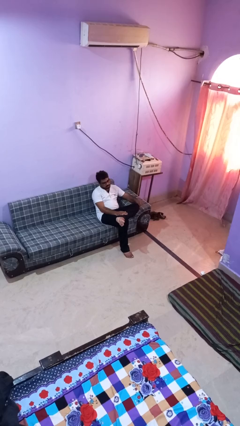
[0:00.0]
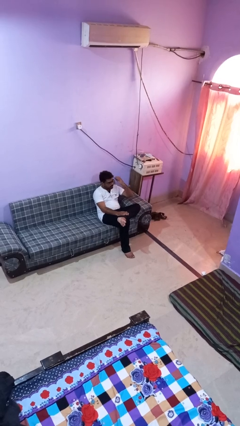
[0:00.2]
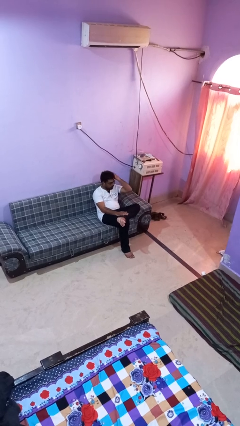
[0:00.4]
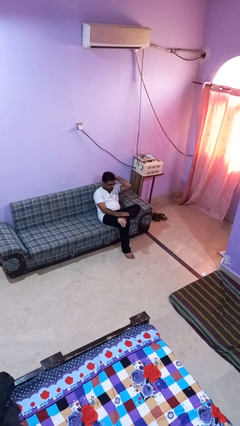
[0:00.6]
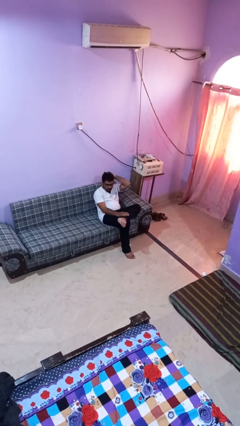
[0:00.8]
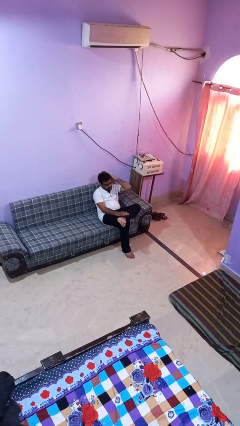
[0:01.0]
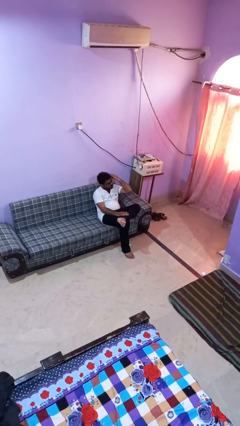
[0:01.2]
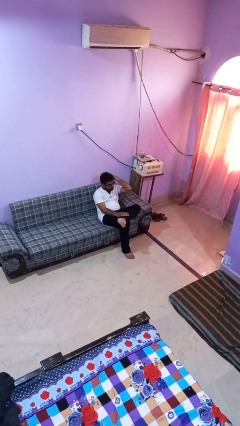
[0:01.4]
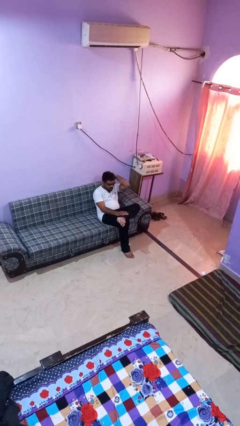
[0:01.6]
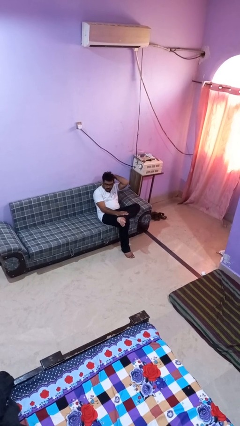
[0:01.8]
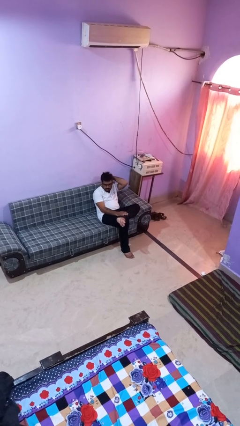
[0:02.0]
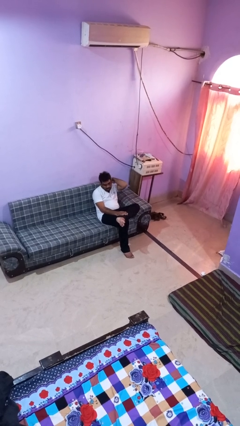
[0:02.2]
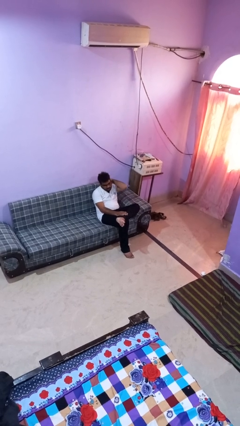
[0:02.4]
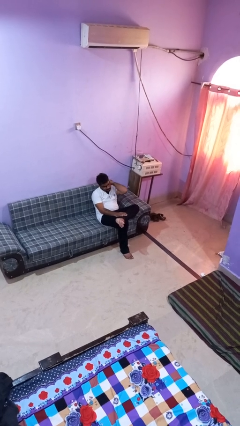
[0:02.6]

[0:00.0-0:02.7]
person strokes hair

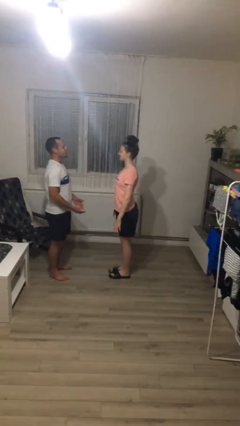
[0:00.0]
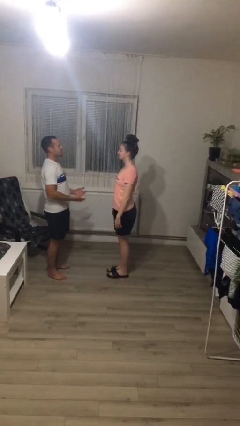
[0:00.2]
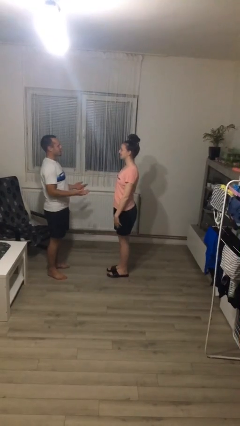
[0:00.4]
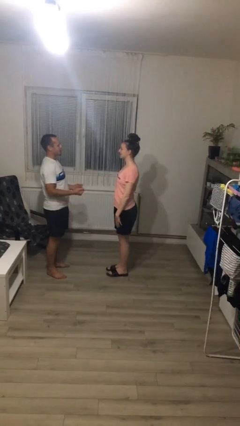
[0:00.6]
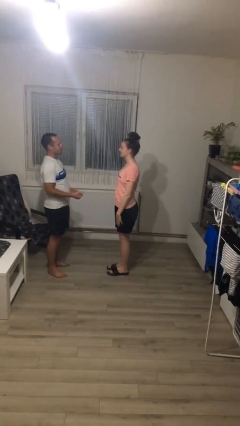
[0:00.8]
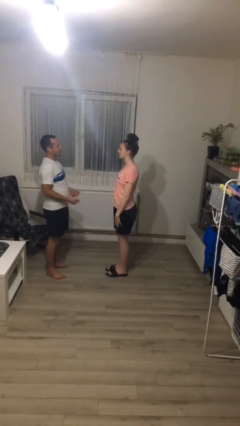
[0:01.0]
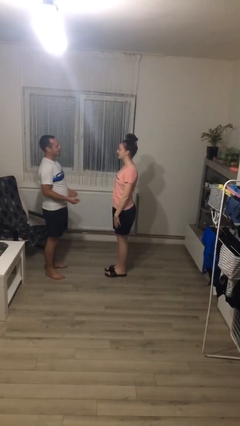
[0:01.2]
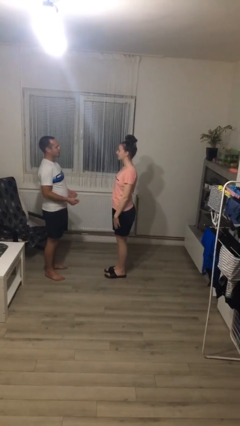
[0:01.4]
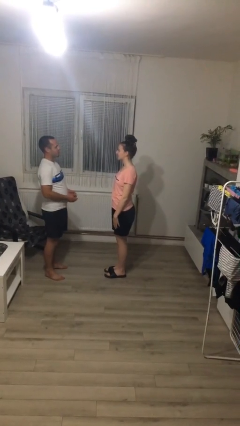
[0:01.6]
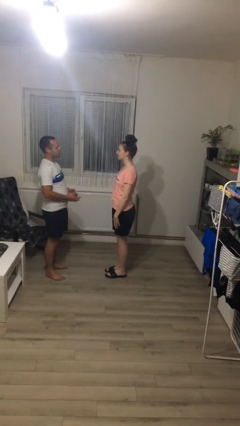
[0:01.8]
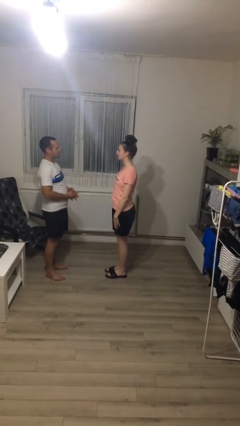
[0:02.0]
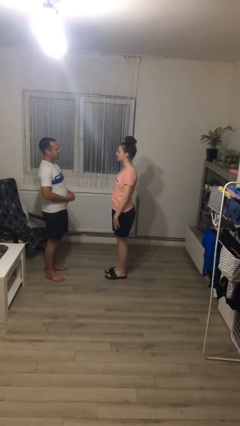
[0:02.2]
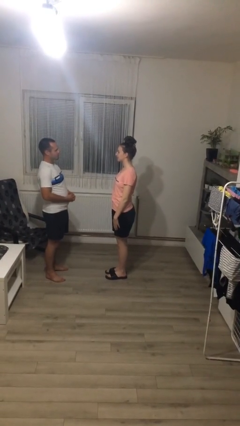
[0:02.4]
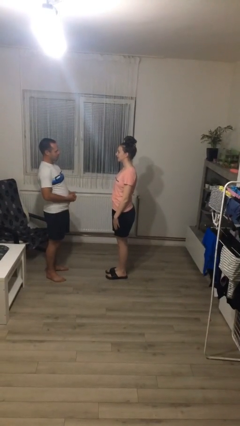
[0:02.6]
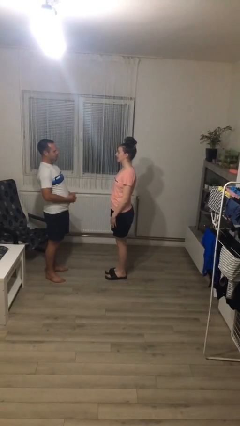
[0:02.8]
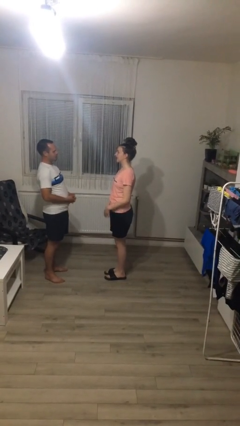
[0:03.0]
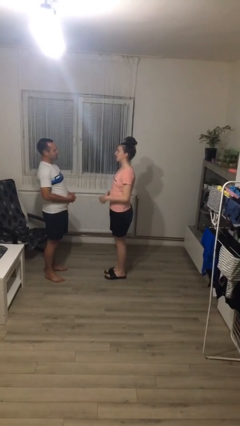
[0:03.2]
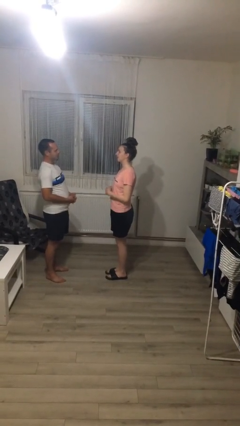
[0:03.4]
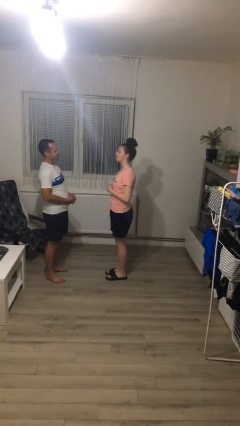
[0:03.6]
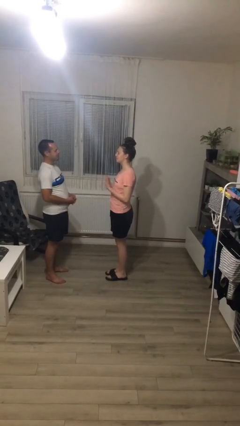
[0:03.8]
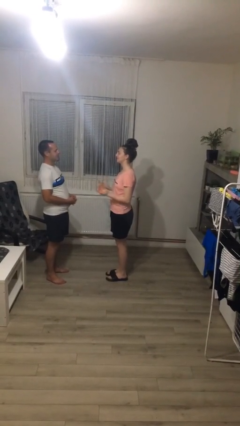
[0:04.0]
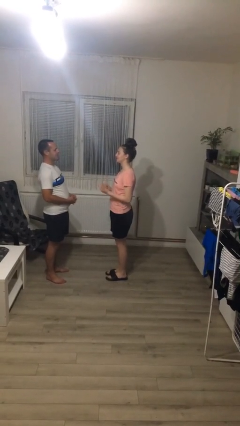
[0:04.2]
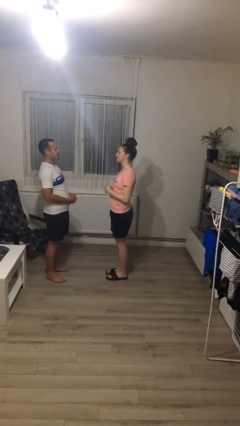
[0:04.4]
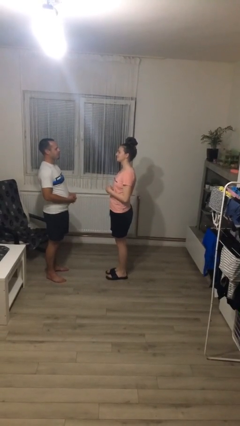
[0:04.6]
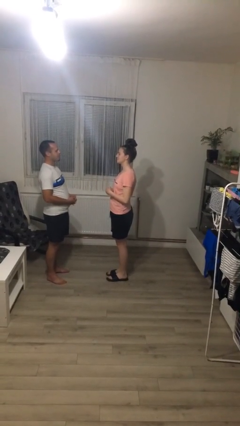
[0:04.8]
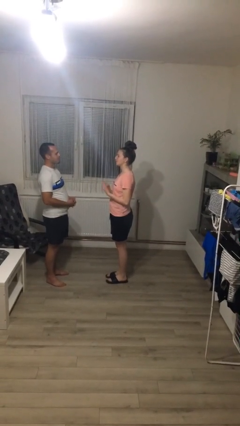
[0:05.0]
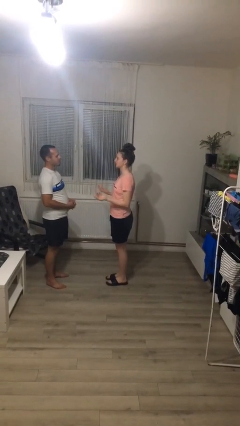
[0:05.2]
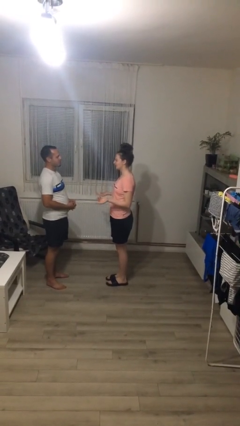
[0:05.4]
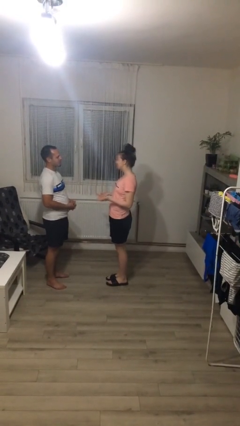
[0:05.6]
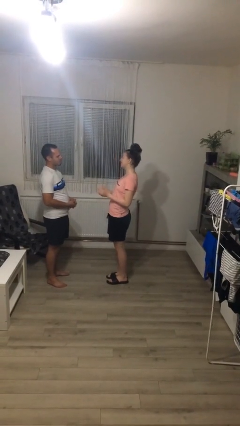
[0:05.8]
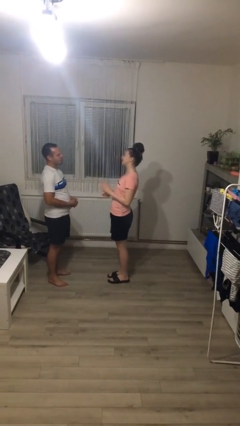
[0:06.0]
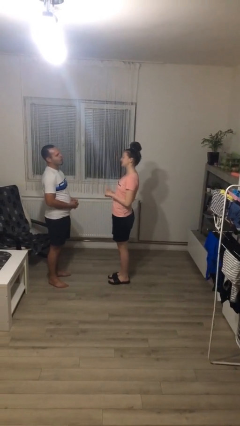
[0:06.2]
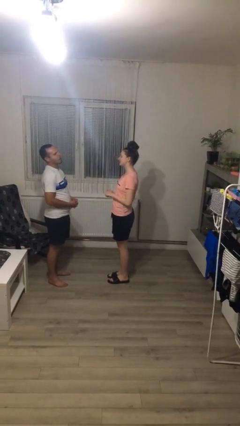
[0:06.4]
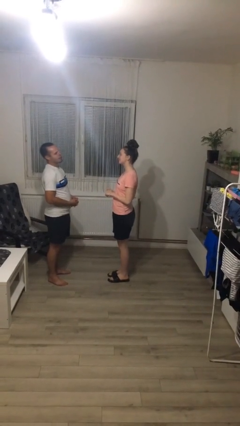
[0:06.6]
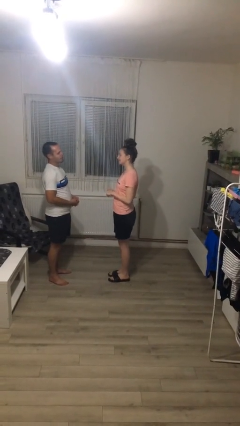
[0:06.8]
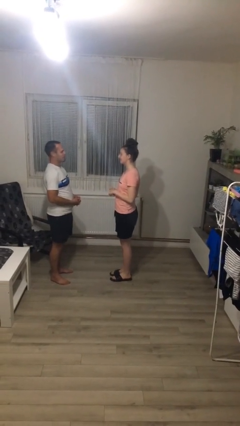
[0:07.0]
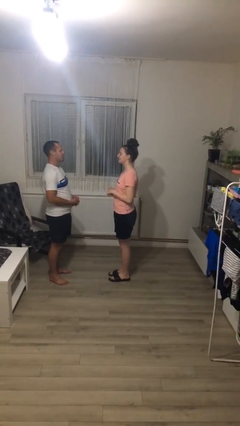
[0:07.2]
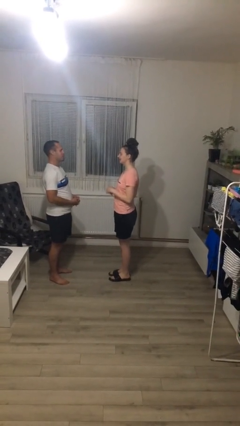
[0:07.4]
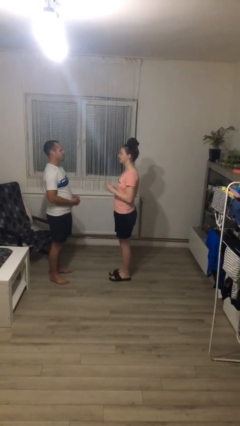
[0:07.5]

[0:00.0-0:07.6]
person talks to person

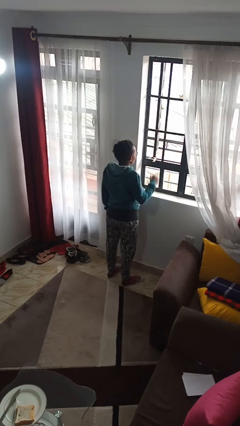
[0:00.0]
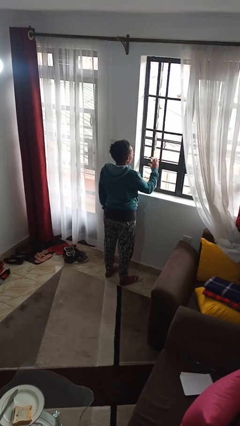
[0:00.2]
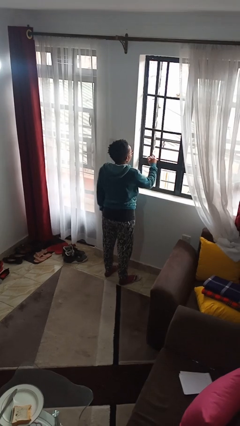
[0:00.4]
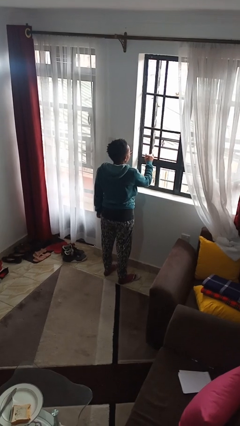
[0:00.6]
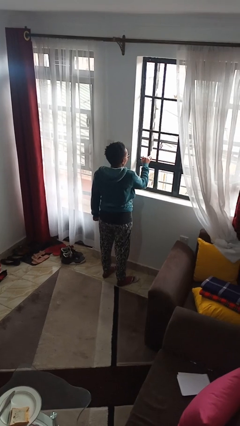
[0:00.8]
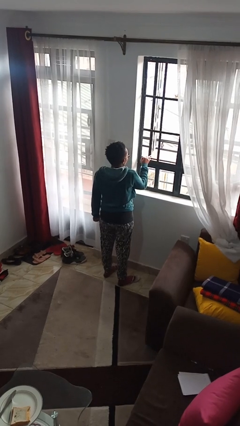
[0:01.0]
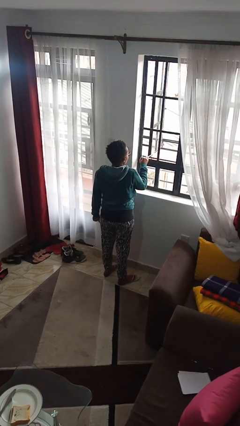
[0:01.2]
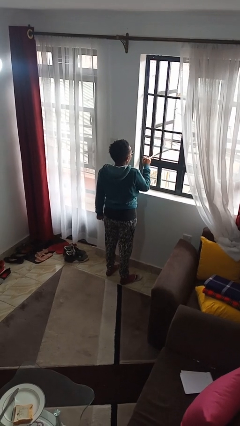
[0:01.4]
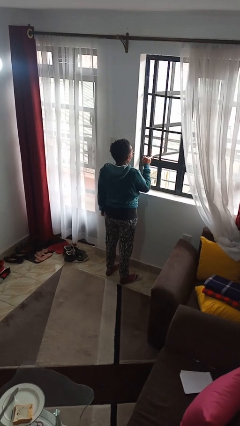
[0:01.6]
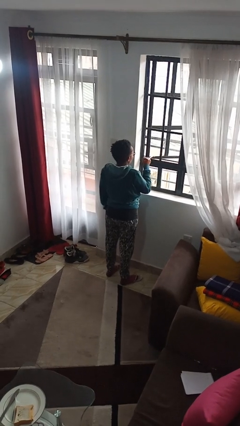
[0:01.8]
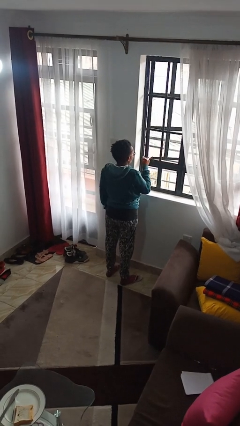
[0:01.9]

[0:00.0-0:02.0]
person closes home window

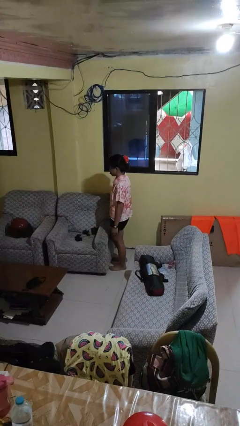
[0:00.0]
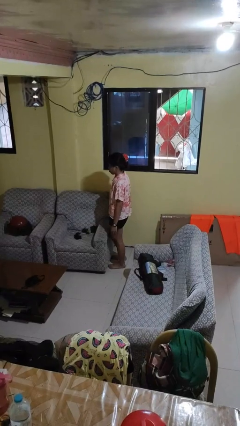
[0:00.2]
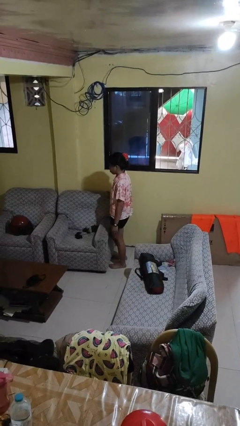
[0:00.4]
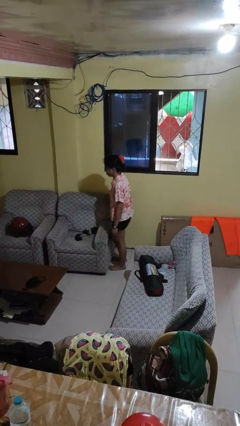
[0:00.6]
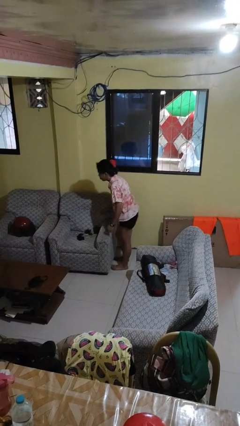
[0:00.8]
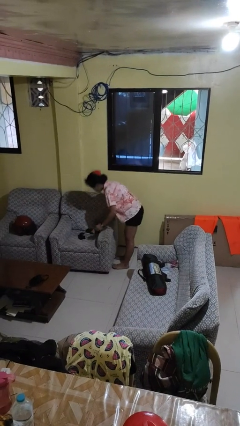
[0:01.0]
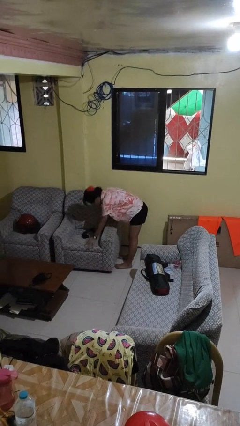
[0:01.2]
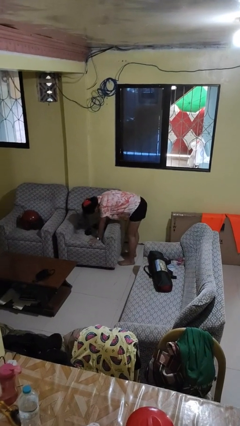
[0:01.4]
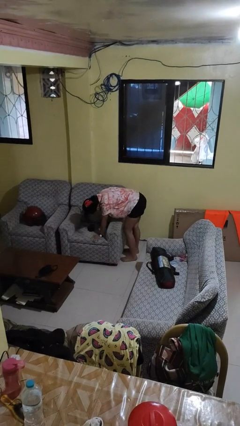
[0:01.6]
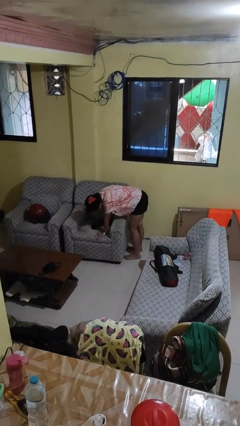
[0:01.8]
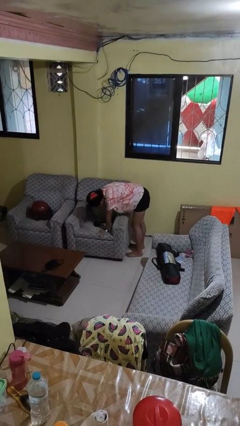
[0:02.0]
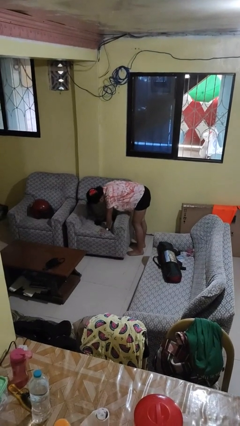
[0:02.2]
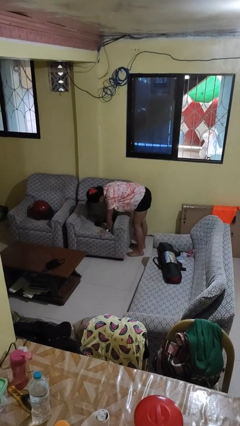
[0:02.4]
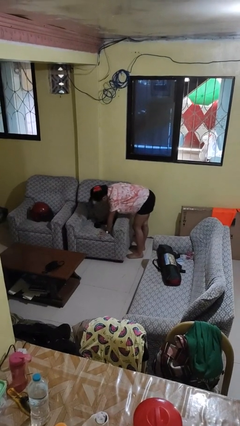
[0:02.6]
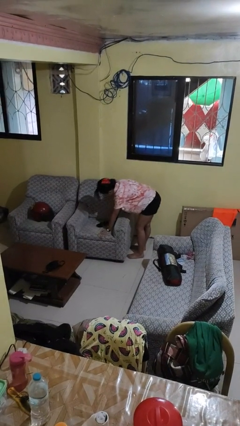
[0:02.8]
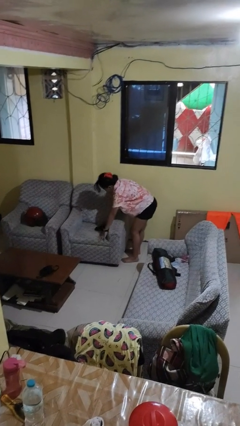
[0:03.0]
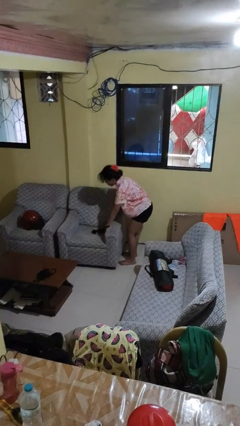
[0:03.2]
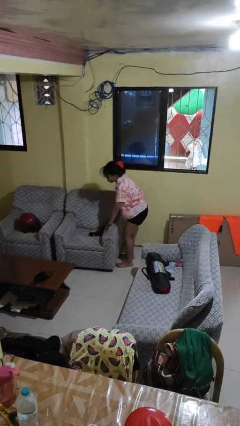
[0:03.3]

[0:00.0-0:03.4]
person searches under couch

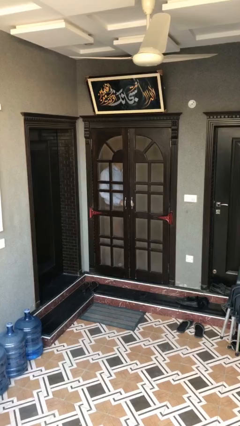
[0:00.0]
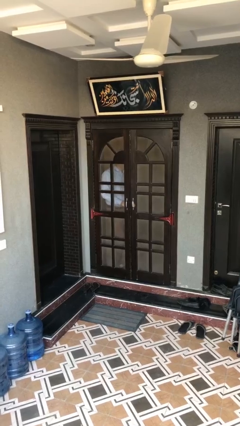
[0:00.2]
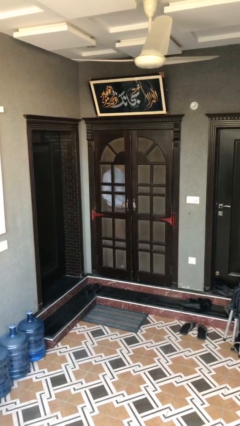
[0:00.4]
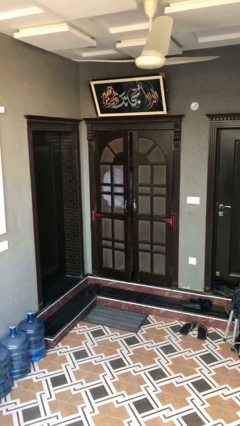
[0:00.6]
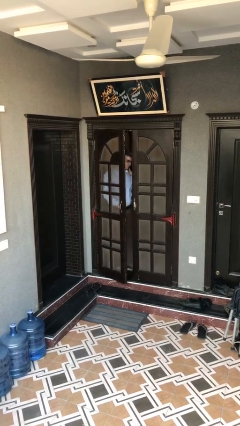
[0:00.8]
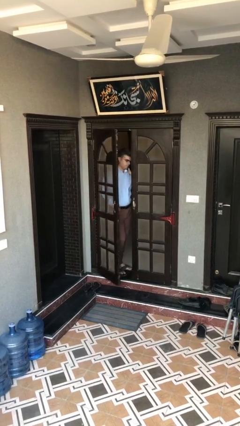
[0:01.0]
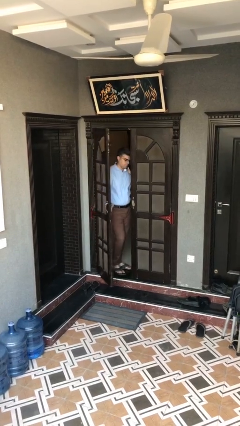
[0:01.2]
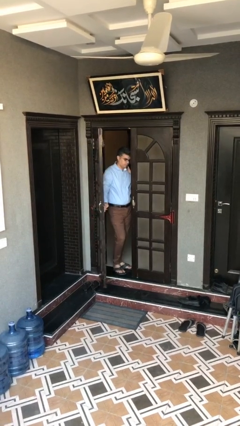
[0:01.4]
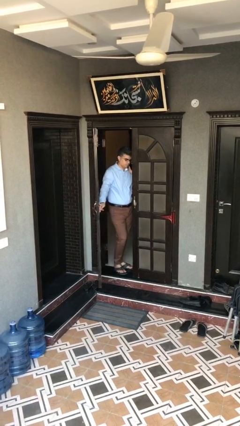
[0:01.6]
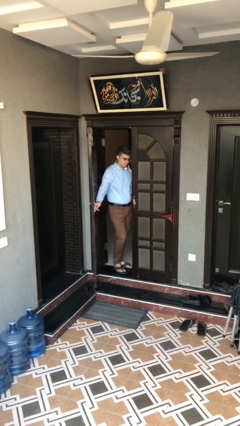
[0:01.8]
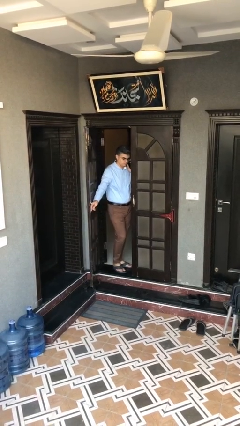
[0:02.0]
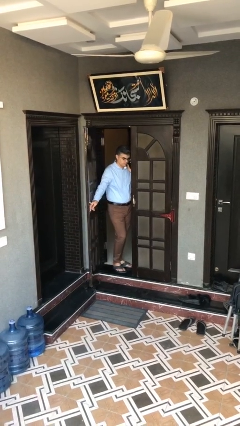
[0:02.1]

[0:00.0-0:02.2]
person opens facility door
